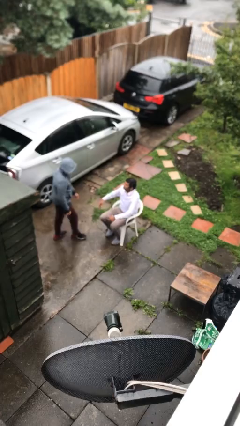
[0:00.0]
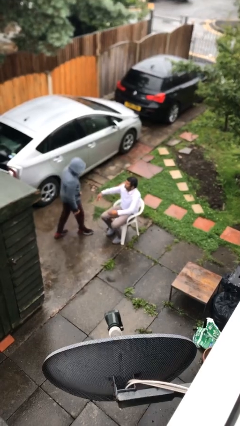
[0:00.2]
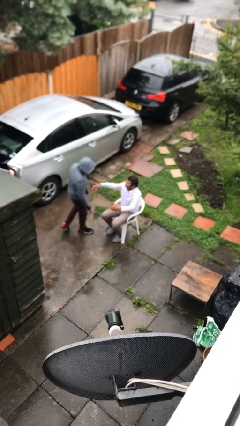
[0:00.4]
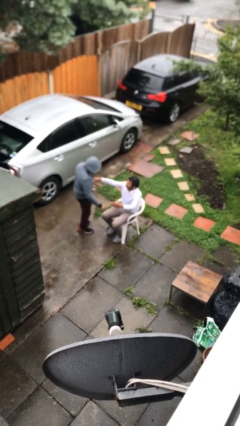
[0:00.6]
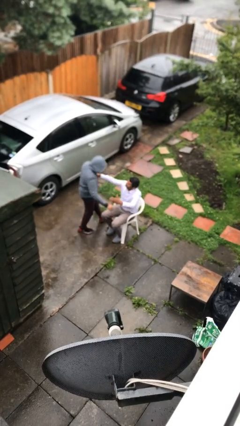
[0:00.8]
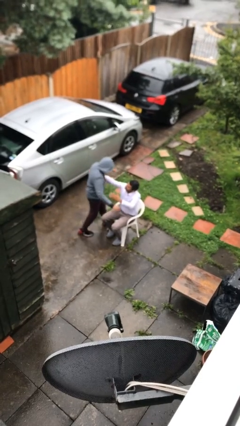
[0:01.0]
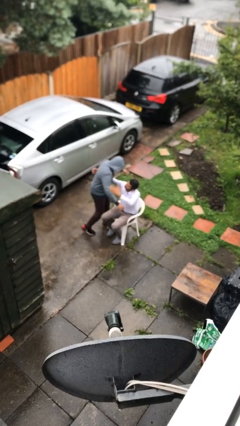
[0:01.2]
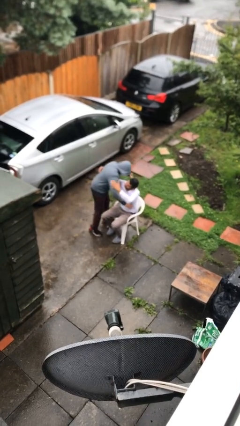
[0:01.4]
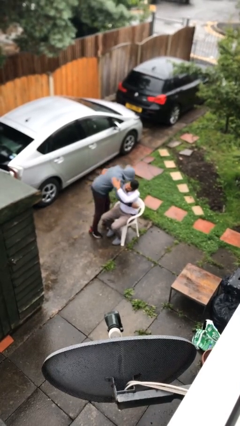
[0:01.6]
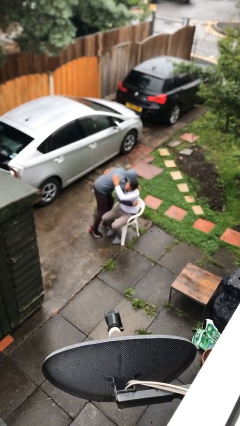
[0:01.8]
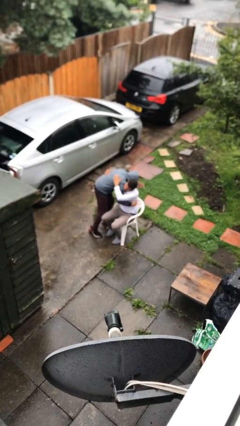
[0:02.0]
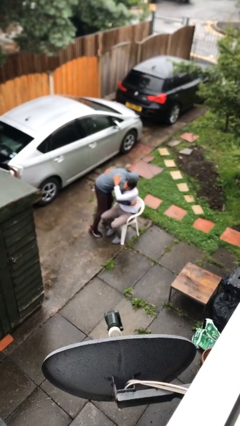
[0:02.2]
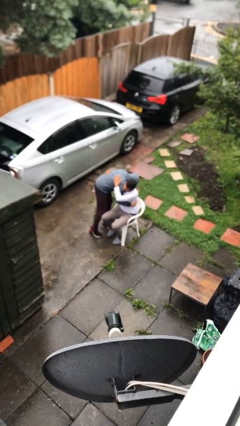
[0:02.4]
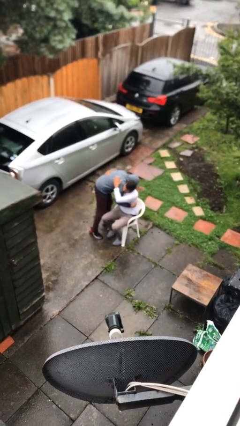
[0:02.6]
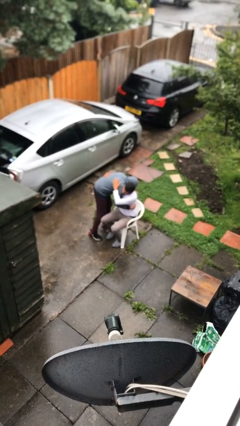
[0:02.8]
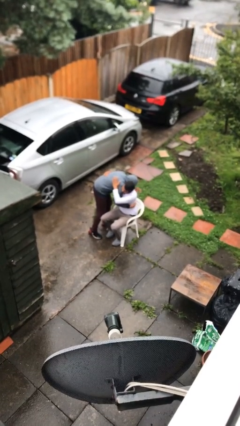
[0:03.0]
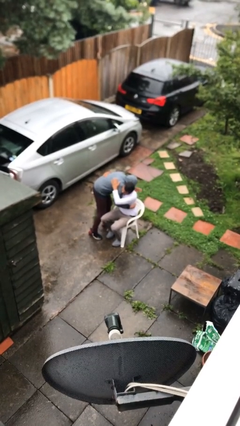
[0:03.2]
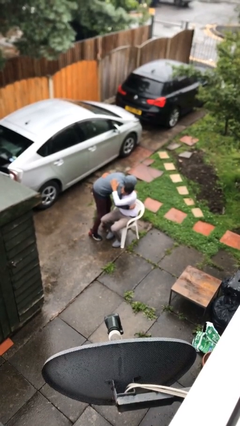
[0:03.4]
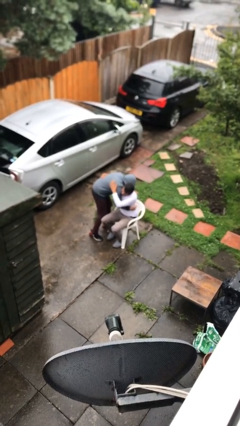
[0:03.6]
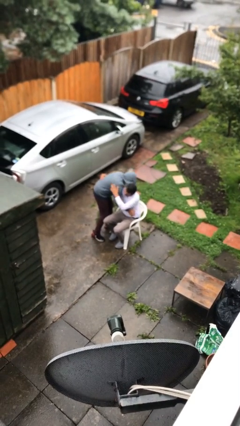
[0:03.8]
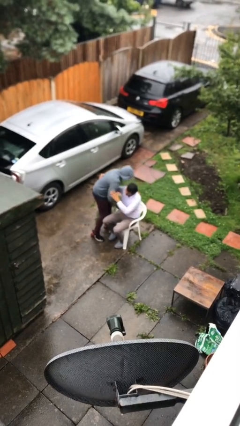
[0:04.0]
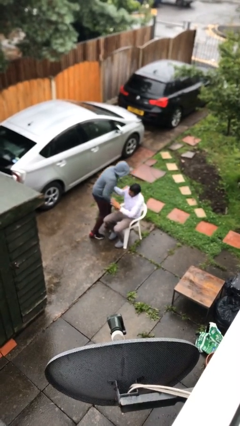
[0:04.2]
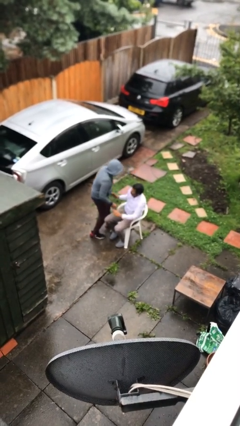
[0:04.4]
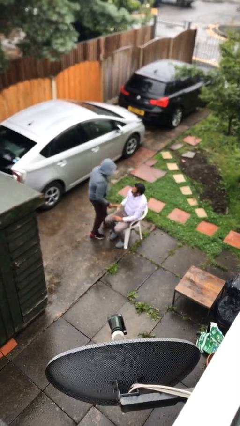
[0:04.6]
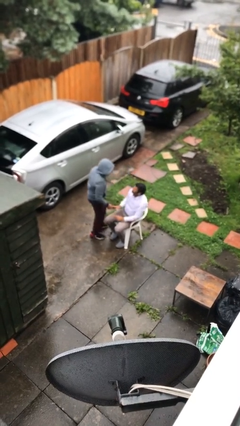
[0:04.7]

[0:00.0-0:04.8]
person embraces person

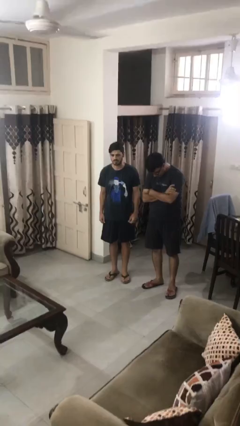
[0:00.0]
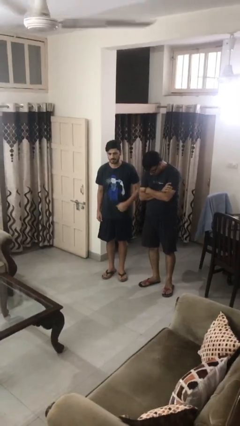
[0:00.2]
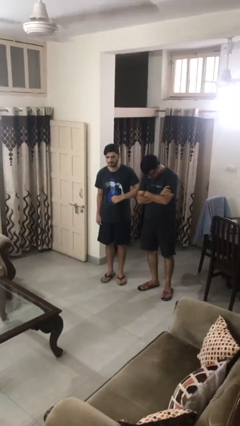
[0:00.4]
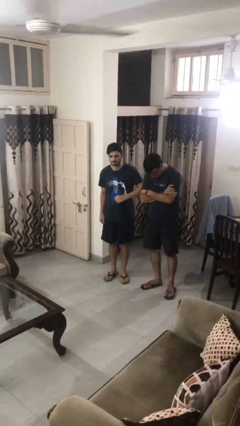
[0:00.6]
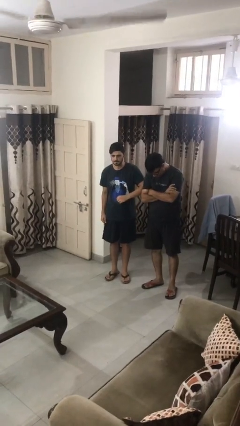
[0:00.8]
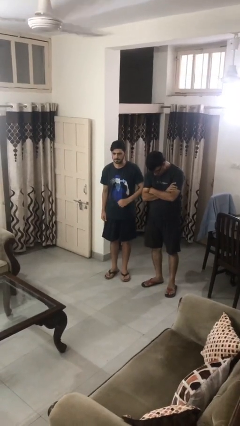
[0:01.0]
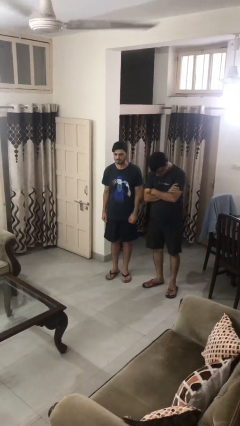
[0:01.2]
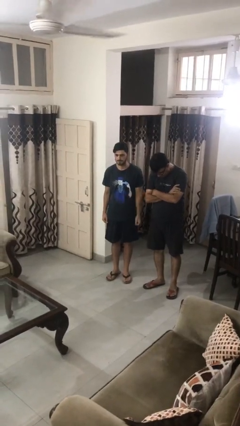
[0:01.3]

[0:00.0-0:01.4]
person nudges person with elbow

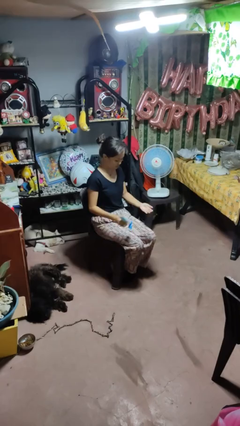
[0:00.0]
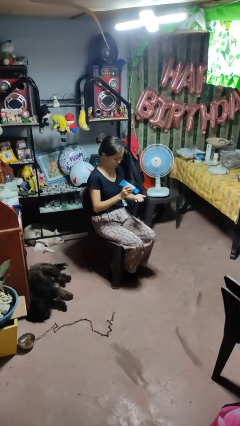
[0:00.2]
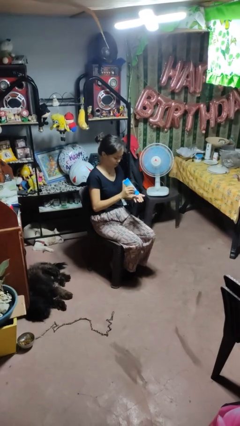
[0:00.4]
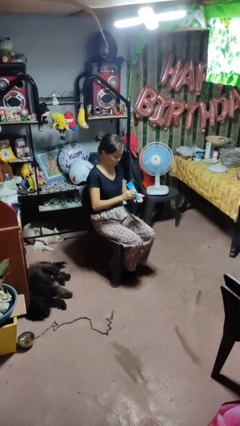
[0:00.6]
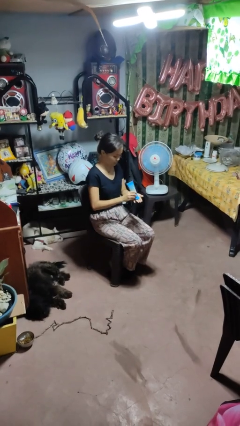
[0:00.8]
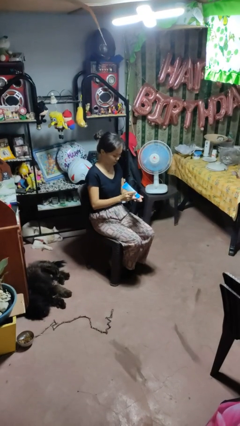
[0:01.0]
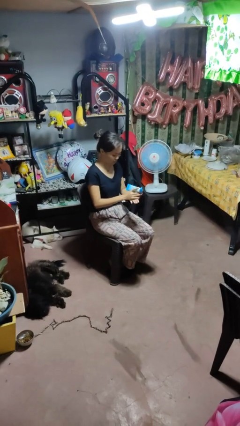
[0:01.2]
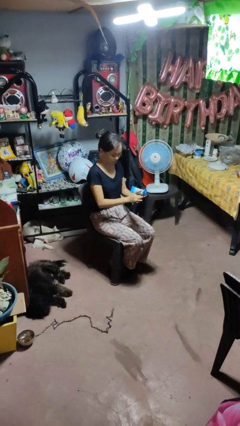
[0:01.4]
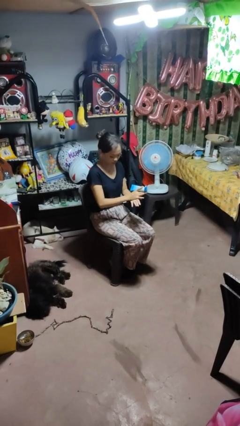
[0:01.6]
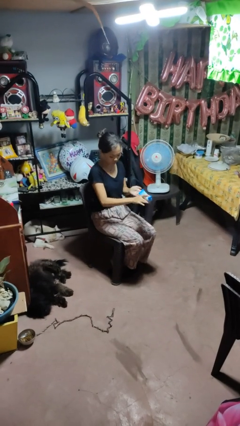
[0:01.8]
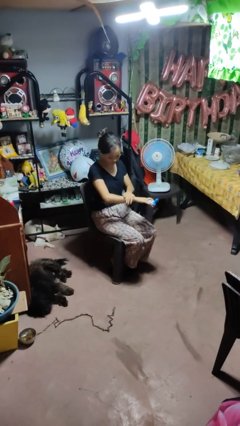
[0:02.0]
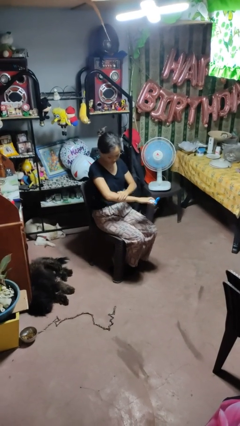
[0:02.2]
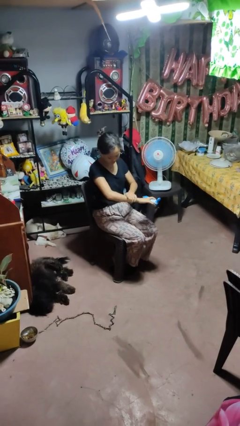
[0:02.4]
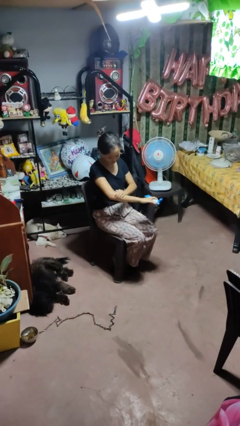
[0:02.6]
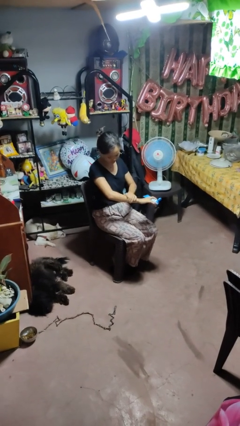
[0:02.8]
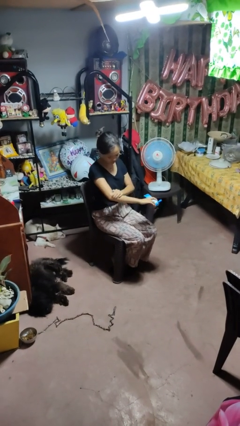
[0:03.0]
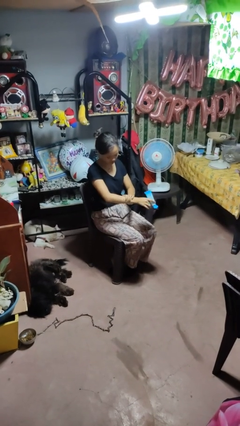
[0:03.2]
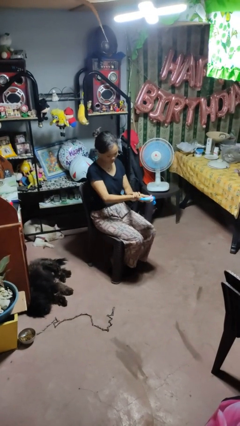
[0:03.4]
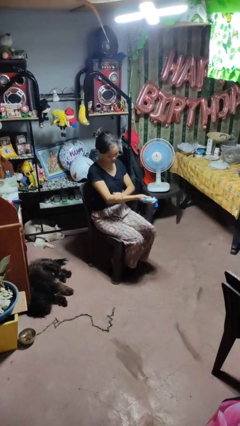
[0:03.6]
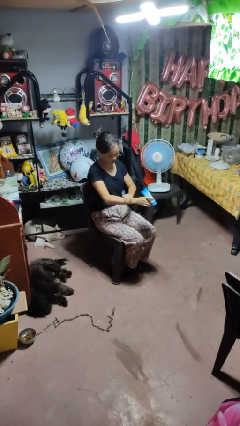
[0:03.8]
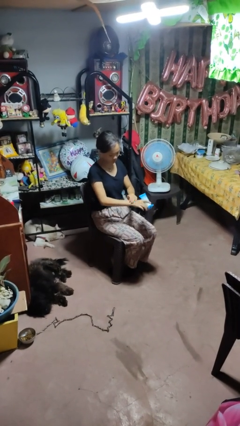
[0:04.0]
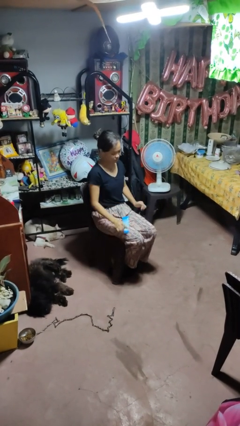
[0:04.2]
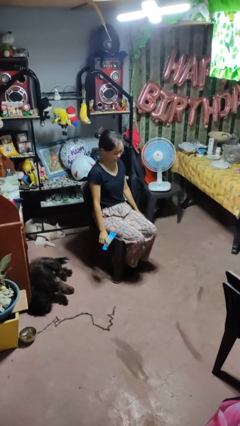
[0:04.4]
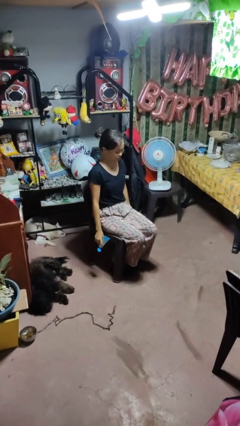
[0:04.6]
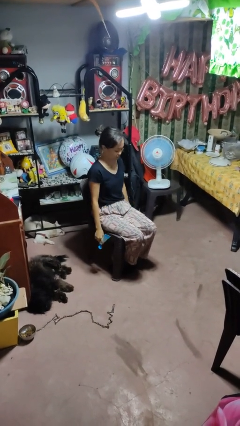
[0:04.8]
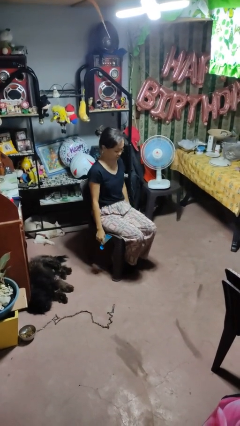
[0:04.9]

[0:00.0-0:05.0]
person applies sunscreen

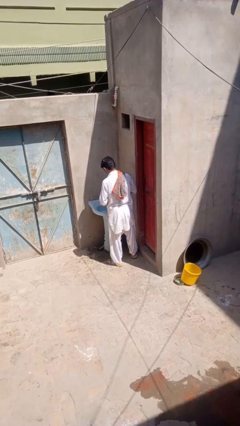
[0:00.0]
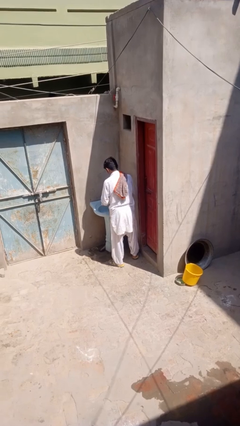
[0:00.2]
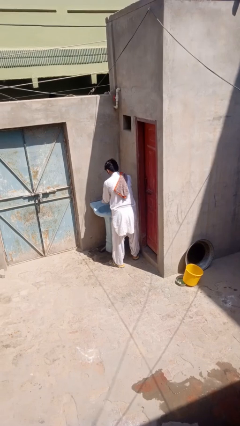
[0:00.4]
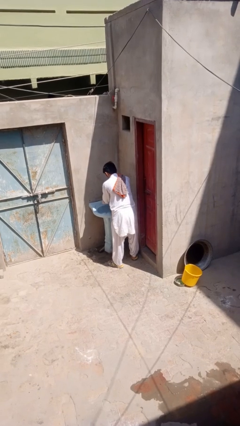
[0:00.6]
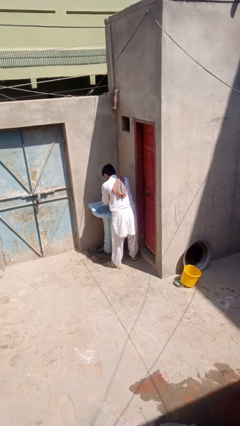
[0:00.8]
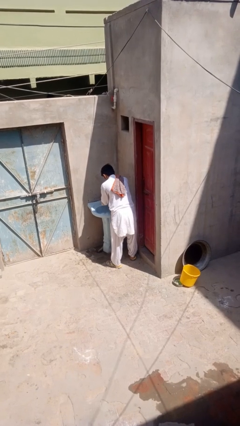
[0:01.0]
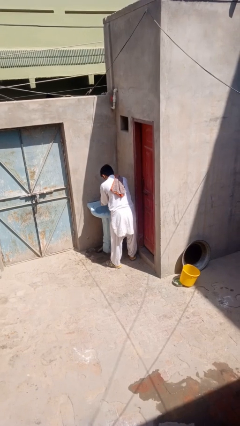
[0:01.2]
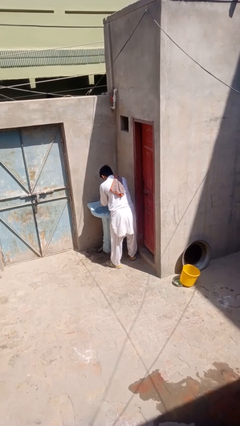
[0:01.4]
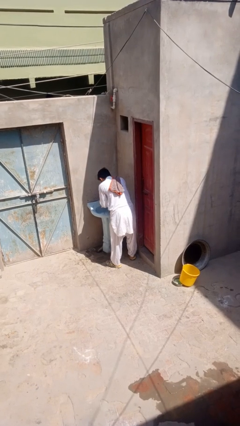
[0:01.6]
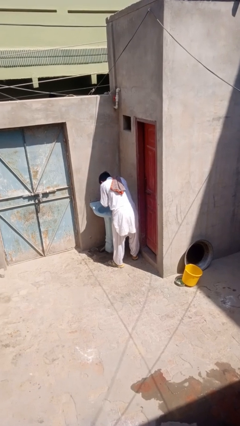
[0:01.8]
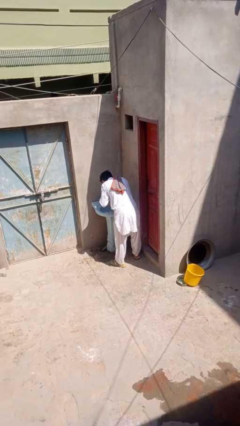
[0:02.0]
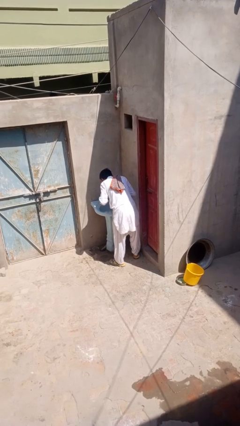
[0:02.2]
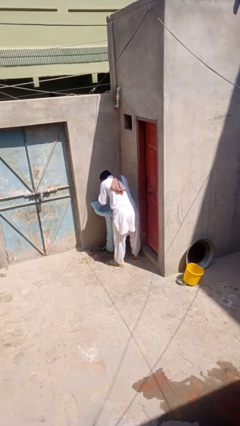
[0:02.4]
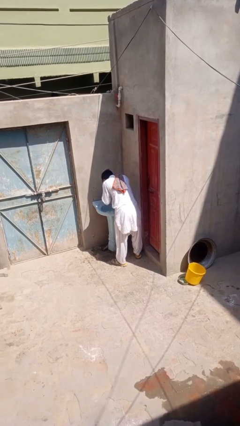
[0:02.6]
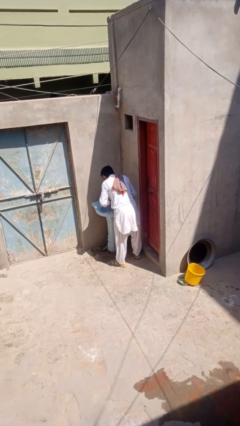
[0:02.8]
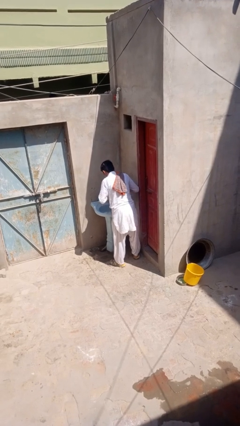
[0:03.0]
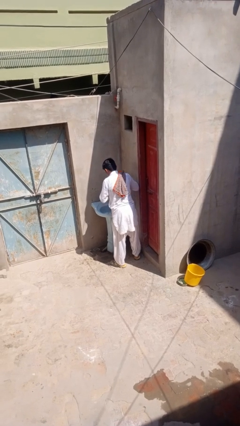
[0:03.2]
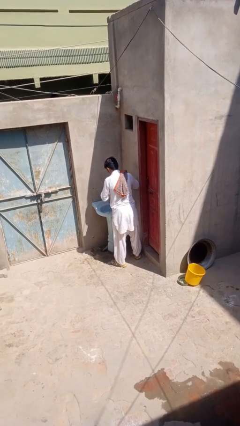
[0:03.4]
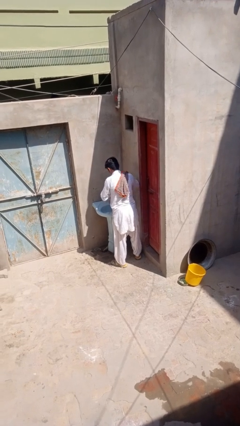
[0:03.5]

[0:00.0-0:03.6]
person washes face

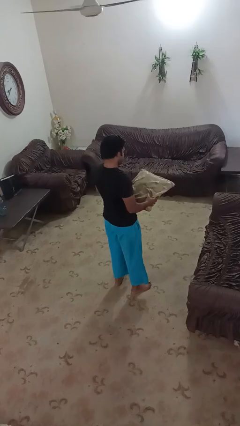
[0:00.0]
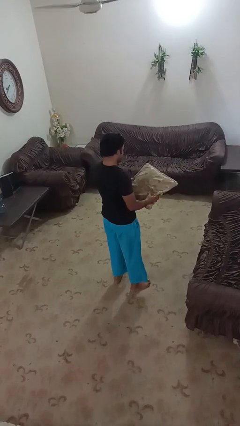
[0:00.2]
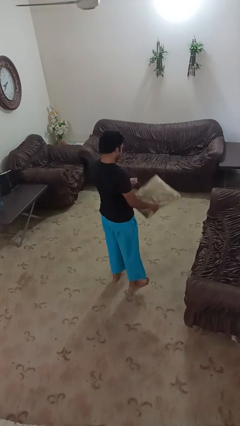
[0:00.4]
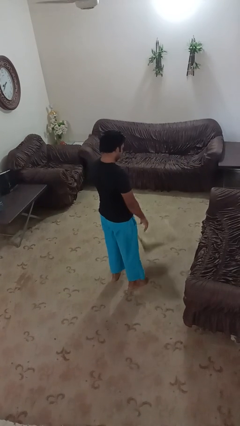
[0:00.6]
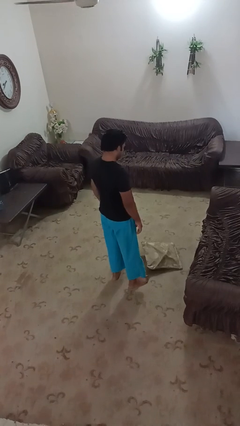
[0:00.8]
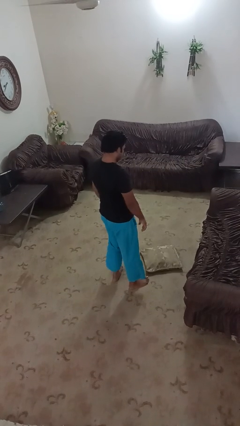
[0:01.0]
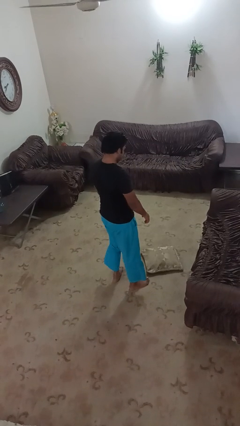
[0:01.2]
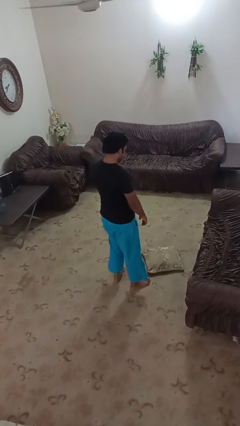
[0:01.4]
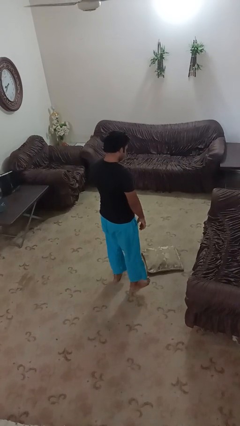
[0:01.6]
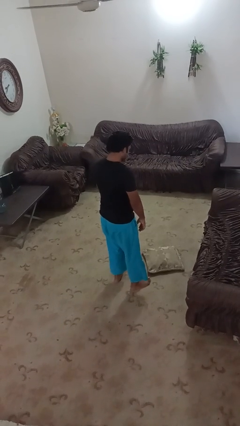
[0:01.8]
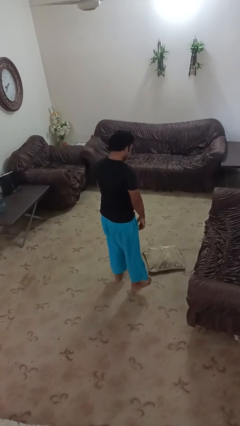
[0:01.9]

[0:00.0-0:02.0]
person drops object

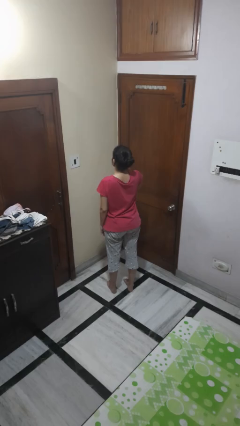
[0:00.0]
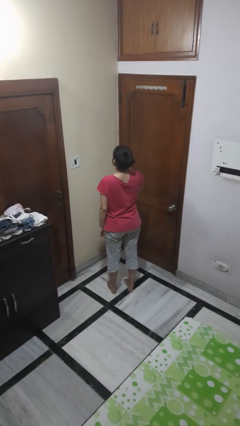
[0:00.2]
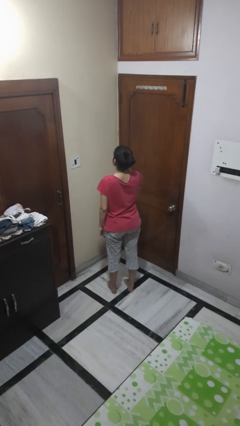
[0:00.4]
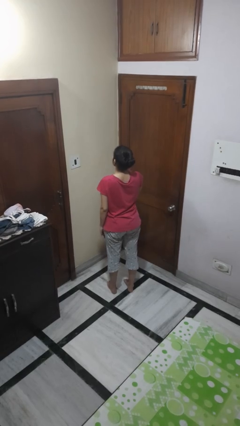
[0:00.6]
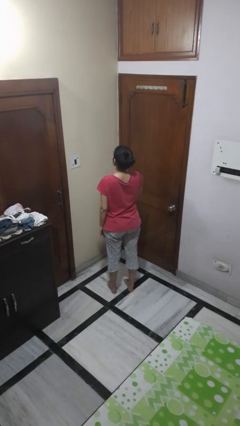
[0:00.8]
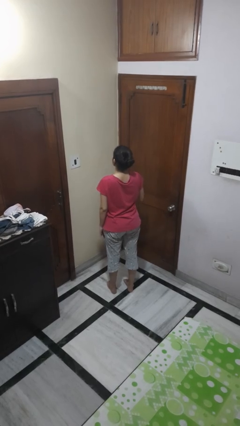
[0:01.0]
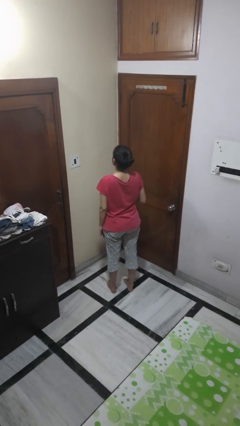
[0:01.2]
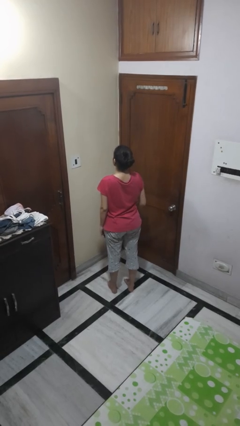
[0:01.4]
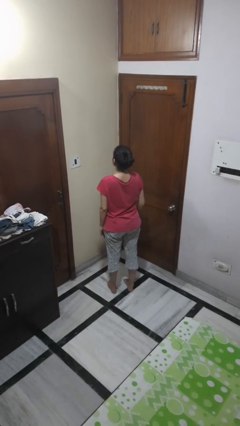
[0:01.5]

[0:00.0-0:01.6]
person gestures cut
